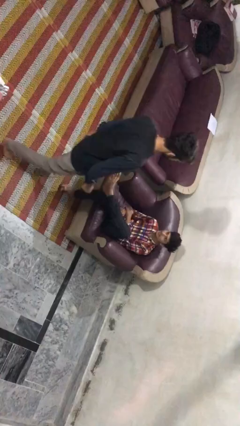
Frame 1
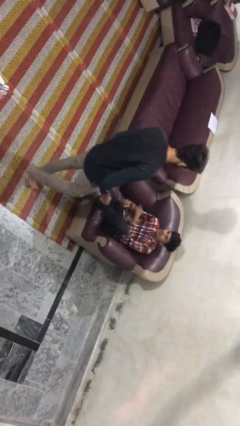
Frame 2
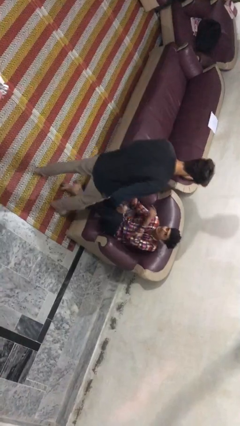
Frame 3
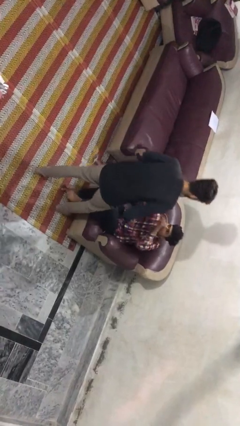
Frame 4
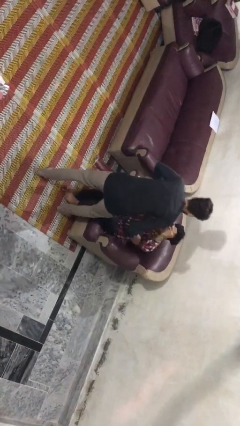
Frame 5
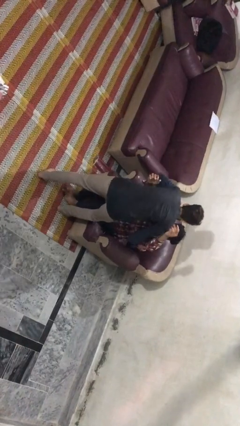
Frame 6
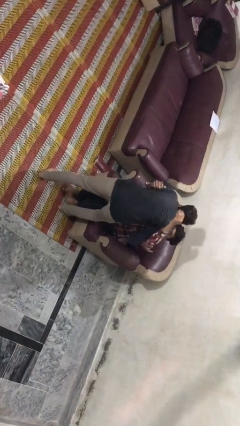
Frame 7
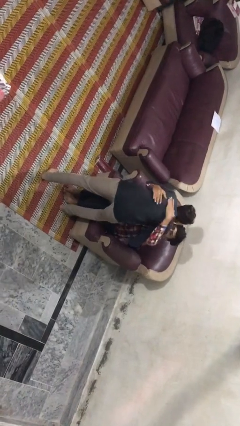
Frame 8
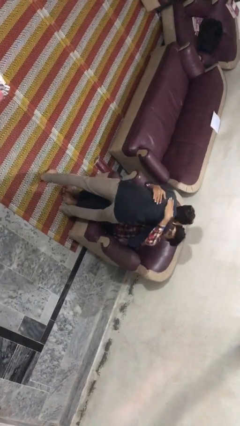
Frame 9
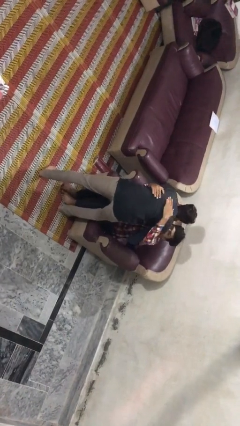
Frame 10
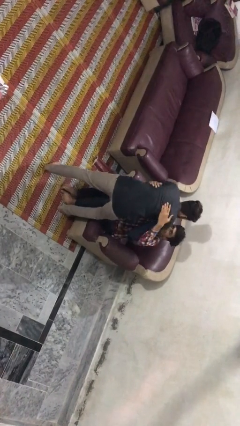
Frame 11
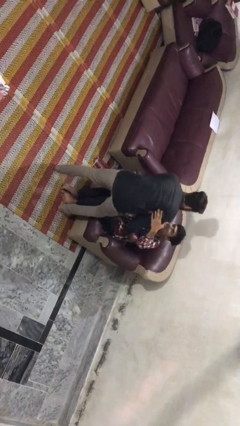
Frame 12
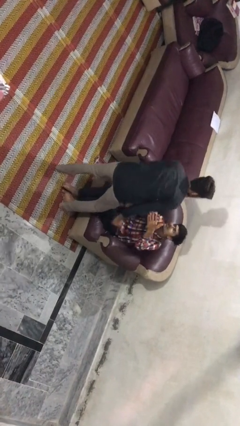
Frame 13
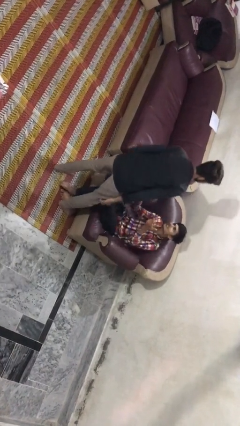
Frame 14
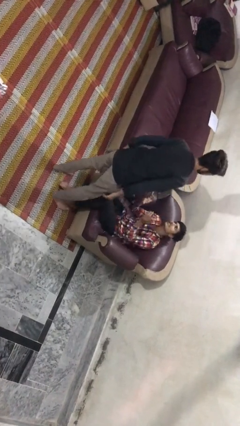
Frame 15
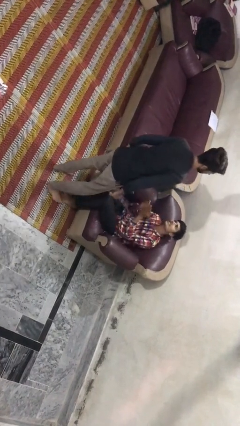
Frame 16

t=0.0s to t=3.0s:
person embraces person

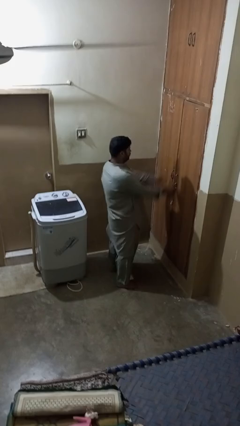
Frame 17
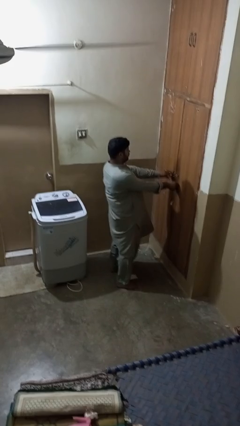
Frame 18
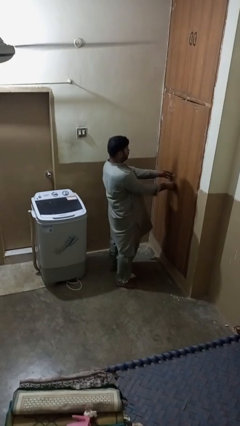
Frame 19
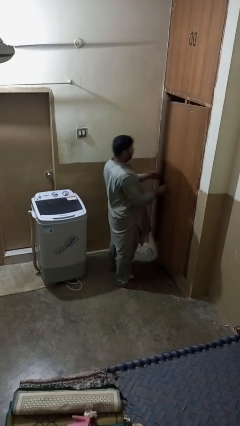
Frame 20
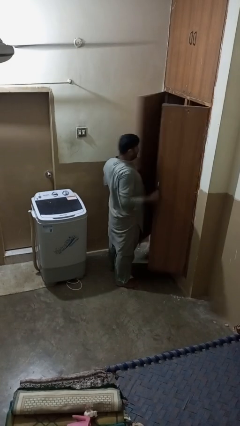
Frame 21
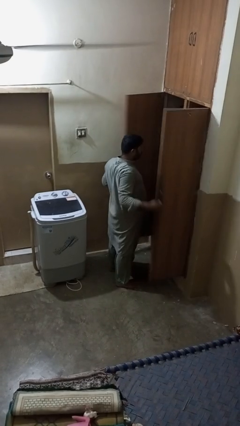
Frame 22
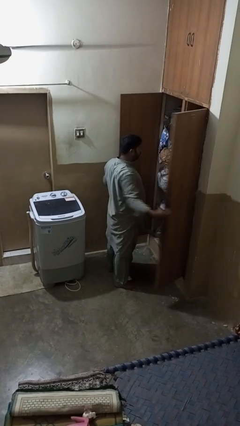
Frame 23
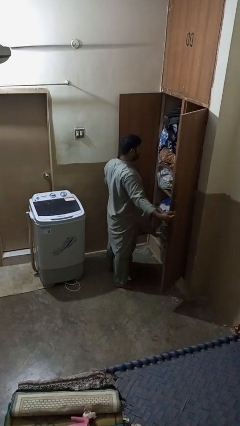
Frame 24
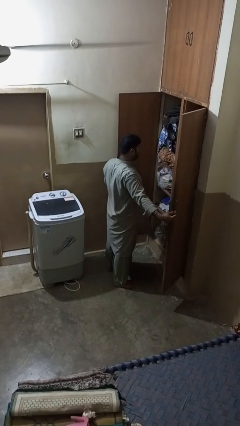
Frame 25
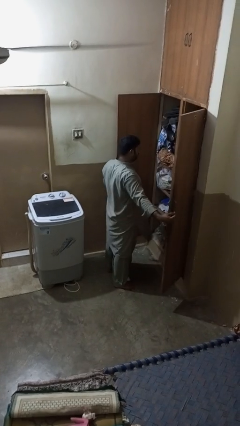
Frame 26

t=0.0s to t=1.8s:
person opens closet door

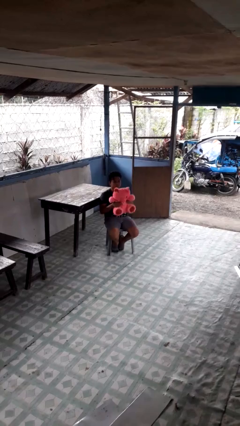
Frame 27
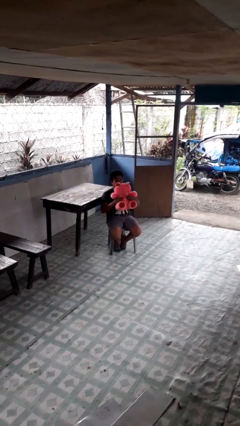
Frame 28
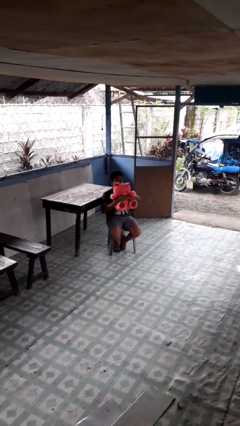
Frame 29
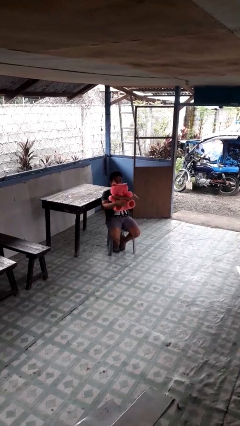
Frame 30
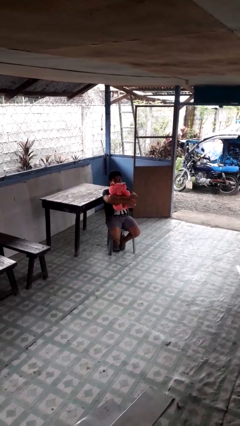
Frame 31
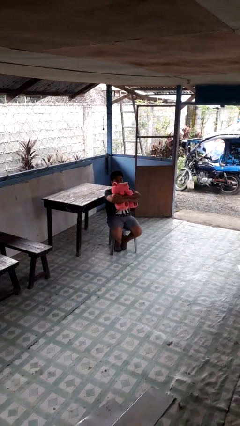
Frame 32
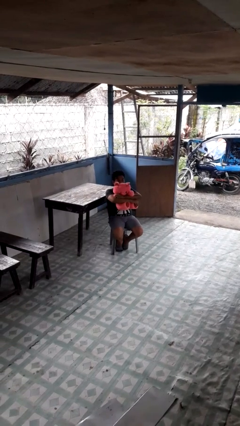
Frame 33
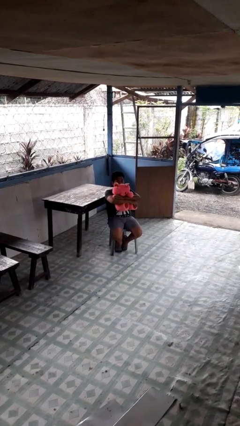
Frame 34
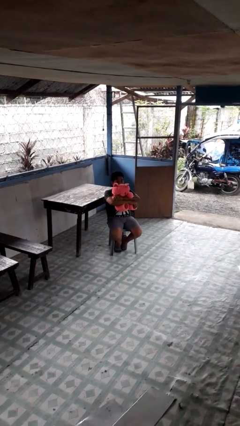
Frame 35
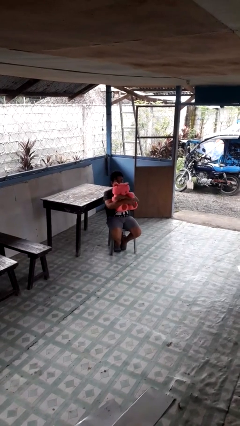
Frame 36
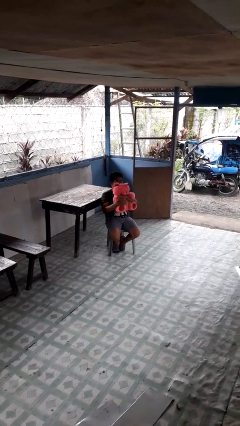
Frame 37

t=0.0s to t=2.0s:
person hugs stuffed animal

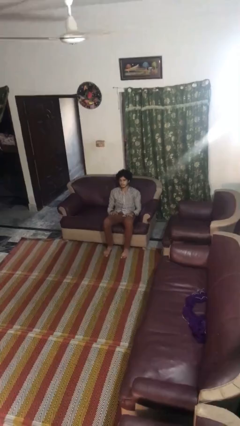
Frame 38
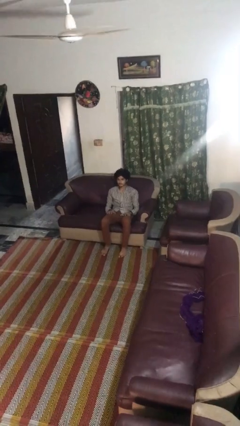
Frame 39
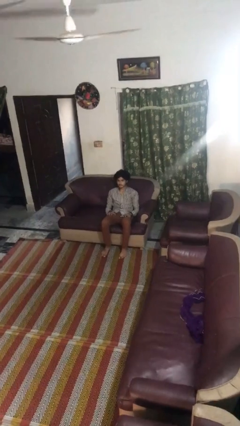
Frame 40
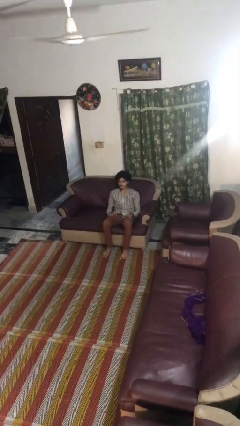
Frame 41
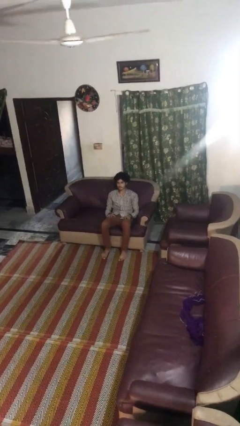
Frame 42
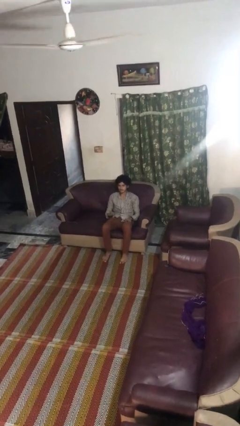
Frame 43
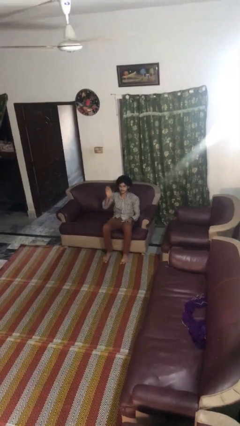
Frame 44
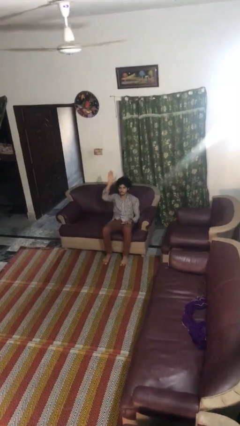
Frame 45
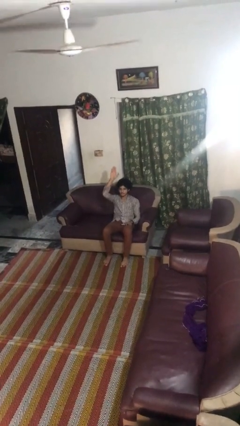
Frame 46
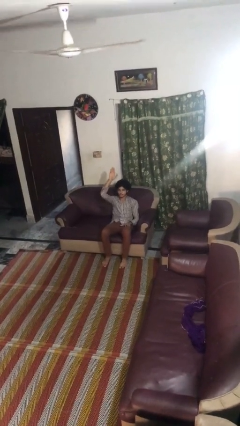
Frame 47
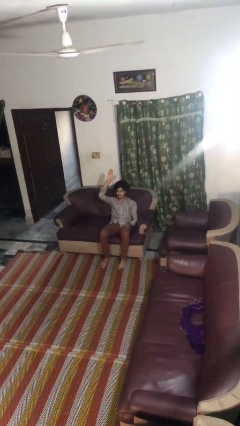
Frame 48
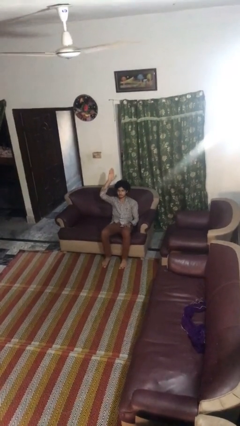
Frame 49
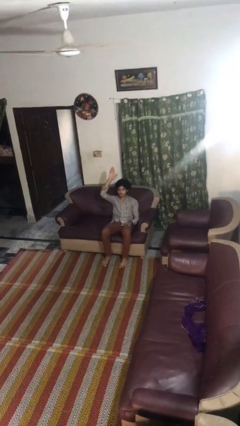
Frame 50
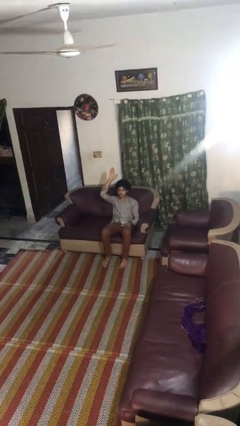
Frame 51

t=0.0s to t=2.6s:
person gestures raise hand

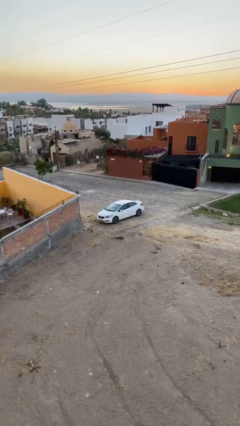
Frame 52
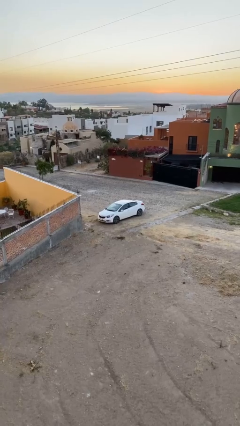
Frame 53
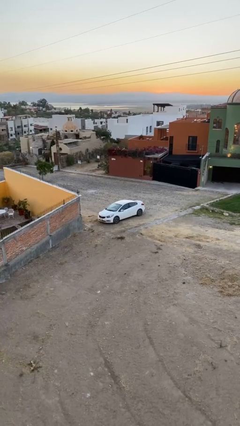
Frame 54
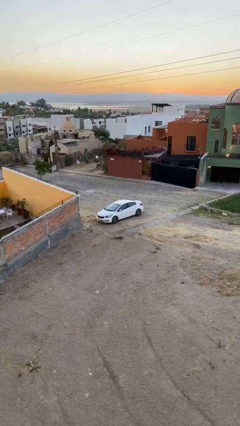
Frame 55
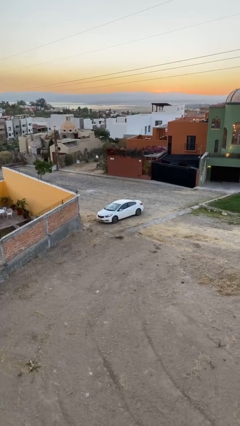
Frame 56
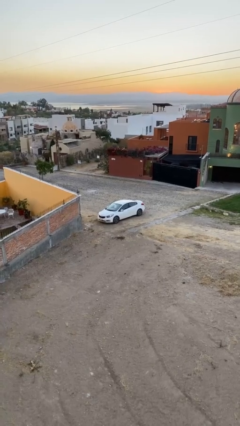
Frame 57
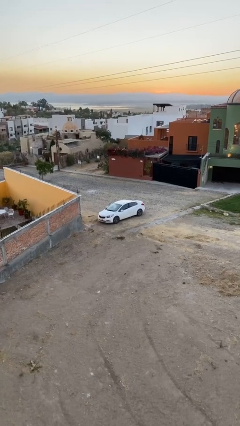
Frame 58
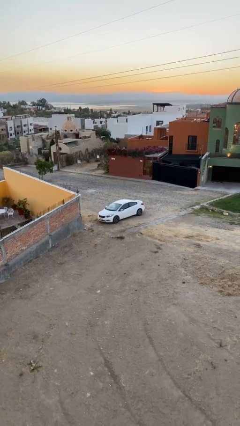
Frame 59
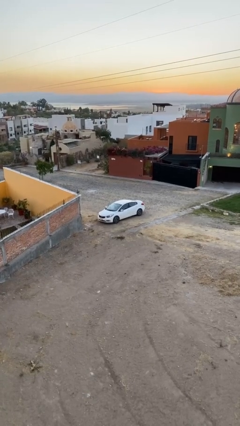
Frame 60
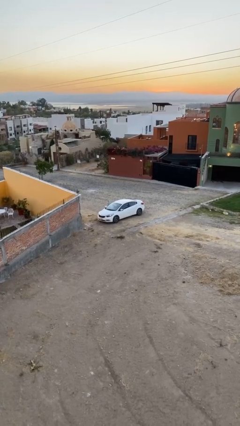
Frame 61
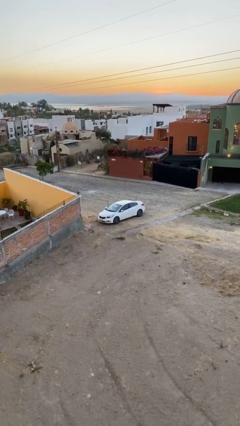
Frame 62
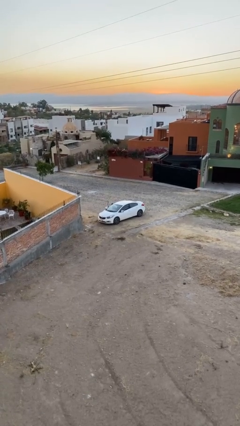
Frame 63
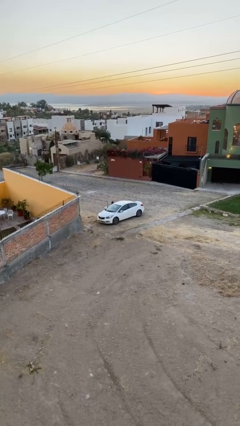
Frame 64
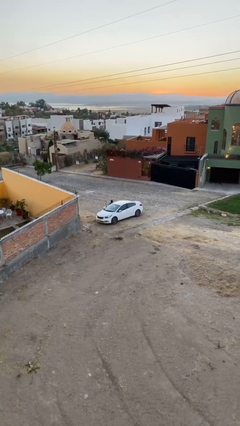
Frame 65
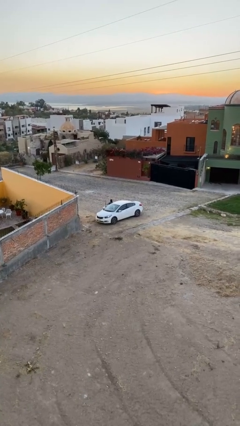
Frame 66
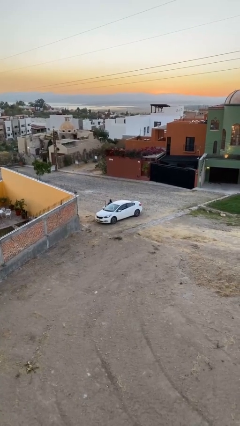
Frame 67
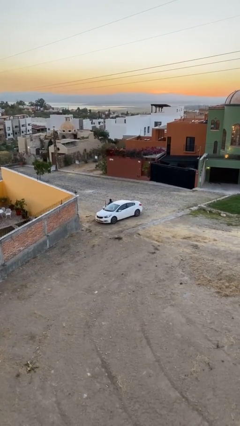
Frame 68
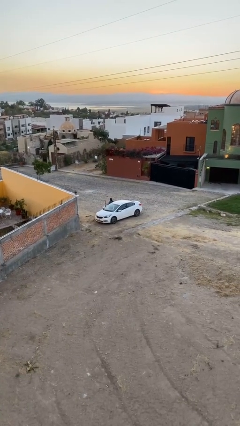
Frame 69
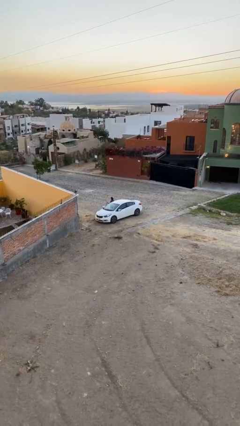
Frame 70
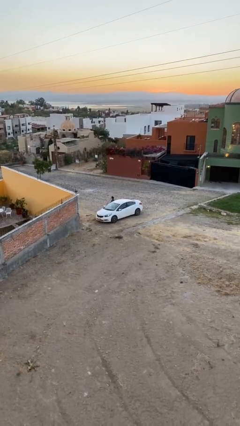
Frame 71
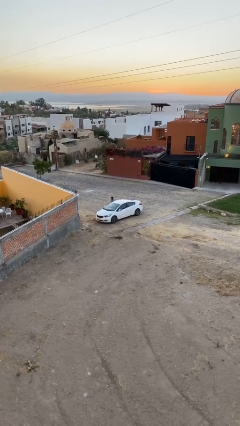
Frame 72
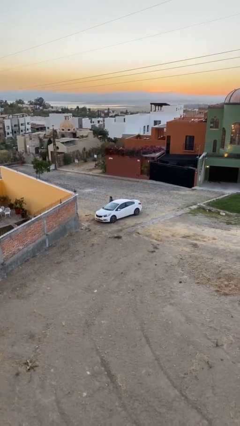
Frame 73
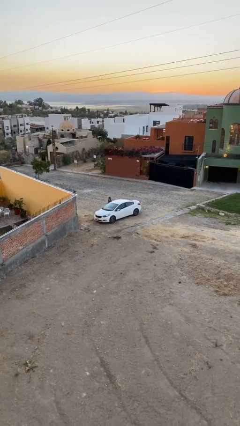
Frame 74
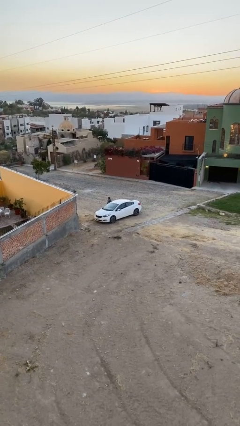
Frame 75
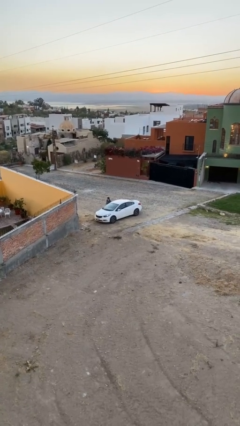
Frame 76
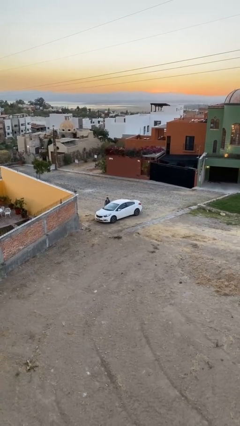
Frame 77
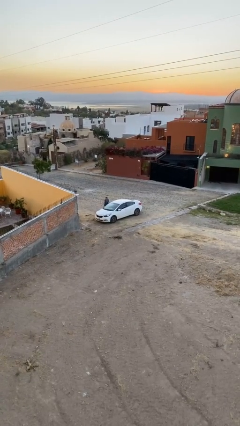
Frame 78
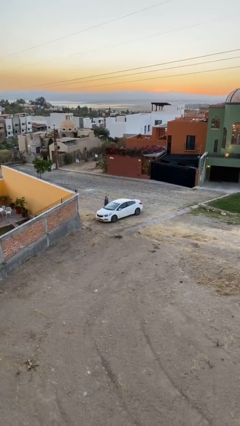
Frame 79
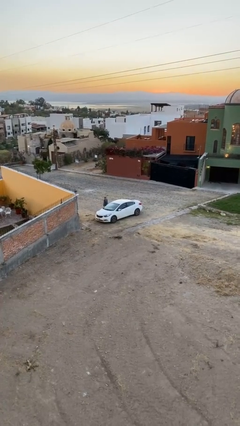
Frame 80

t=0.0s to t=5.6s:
car drops off person

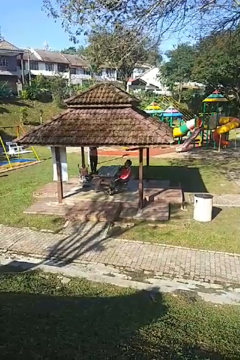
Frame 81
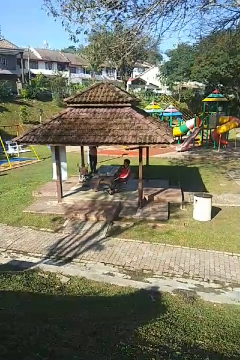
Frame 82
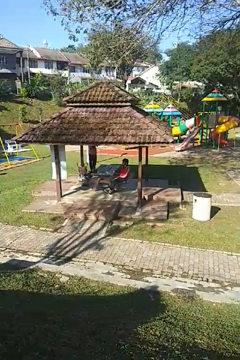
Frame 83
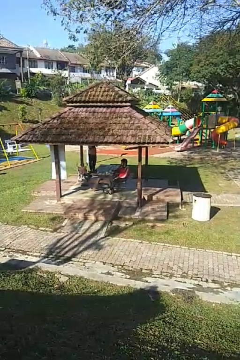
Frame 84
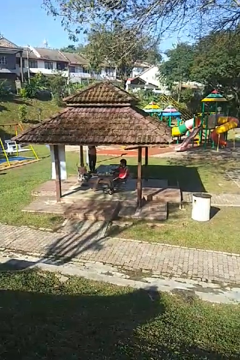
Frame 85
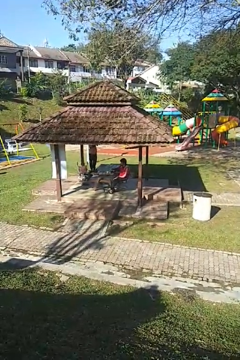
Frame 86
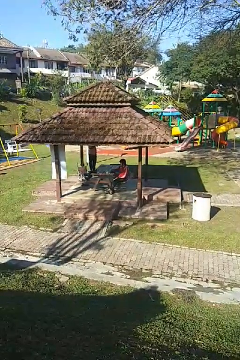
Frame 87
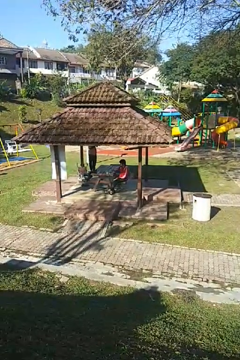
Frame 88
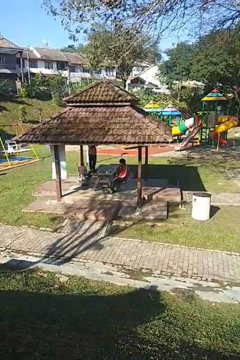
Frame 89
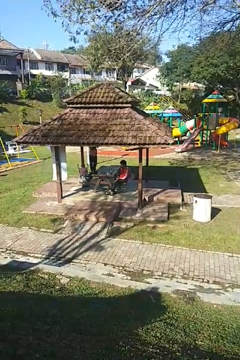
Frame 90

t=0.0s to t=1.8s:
person puts down object on table

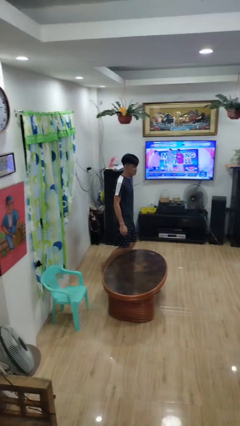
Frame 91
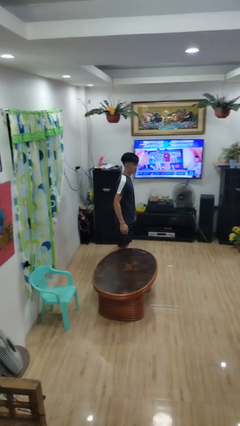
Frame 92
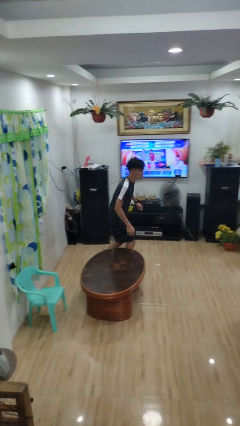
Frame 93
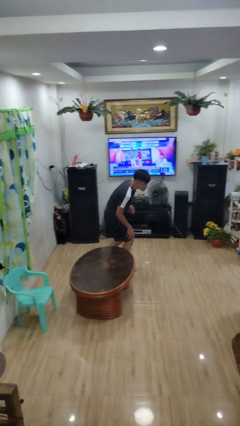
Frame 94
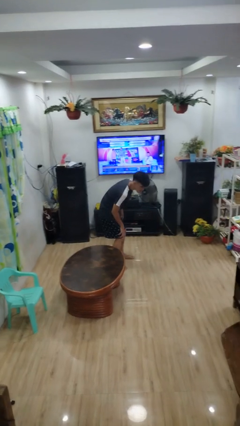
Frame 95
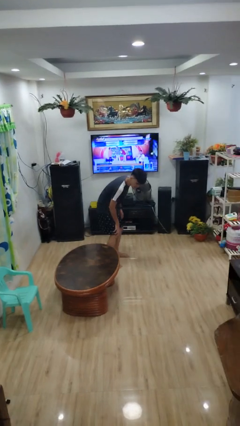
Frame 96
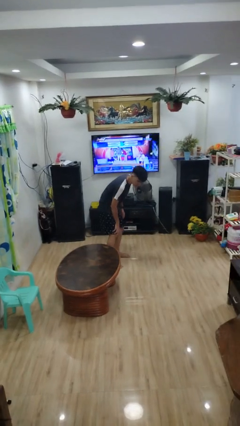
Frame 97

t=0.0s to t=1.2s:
person bumps into table
